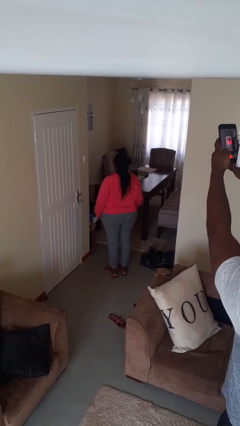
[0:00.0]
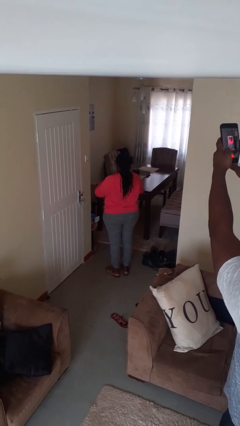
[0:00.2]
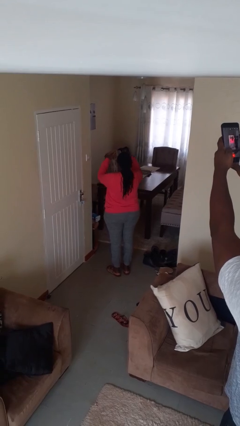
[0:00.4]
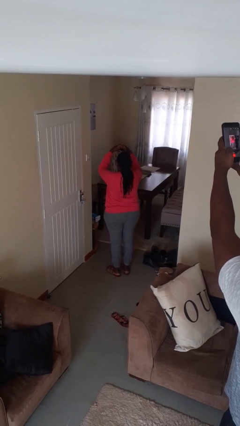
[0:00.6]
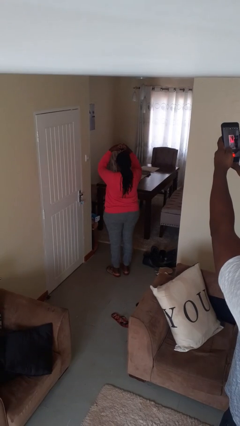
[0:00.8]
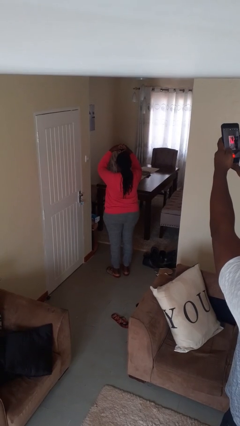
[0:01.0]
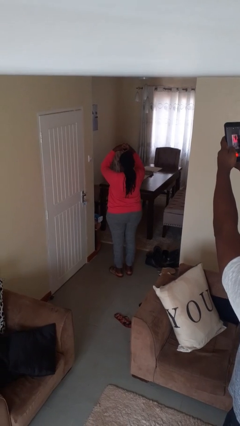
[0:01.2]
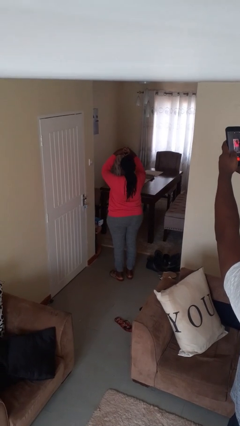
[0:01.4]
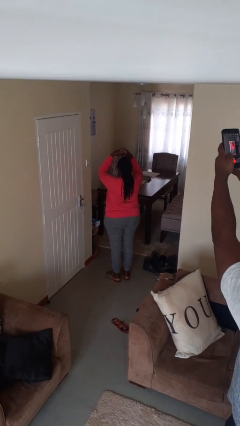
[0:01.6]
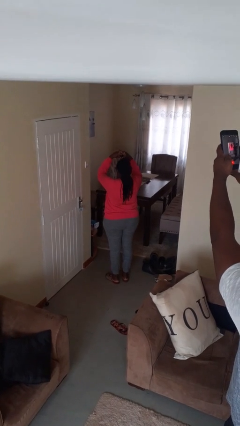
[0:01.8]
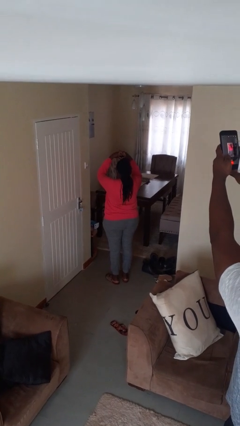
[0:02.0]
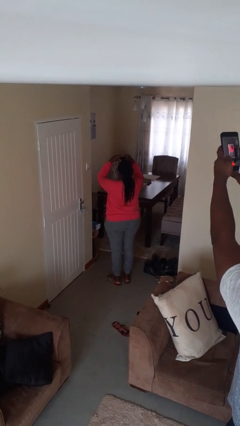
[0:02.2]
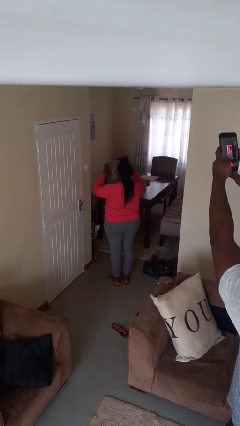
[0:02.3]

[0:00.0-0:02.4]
person gestures heart

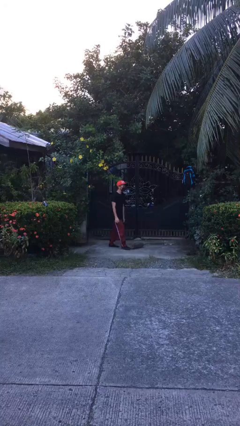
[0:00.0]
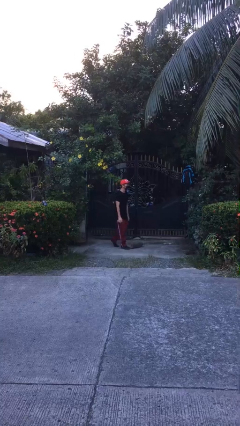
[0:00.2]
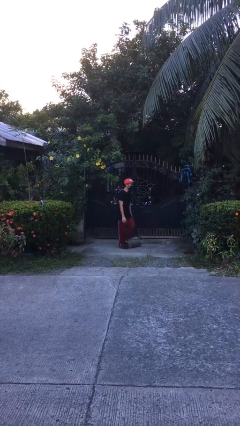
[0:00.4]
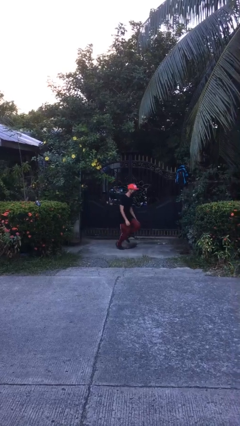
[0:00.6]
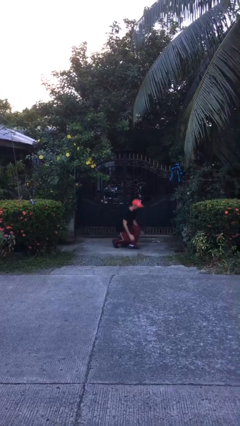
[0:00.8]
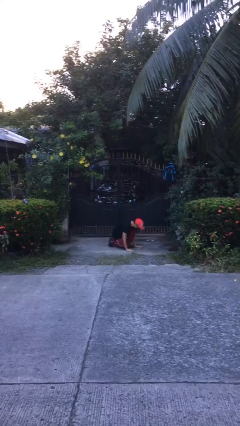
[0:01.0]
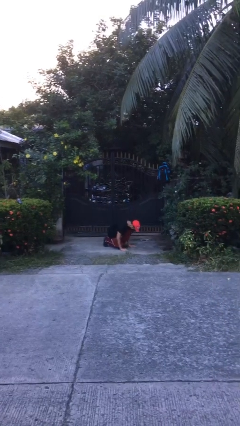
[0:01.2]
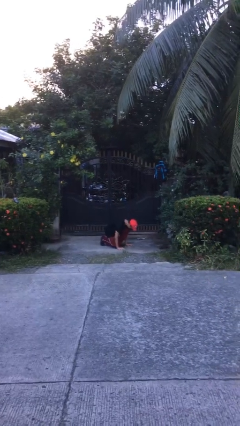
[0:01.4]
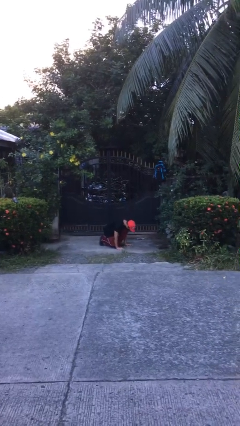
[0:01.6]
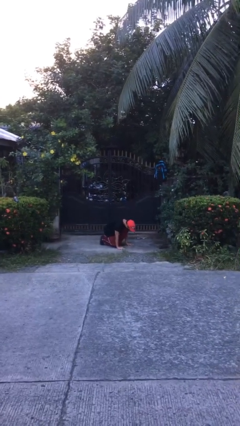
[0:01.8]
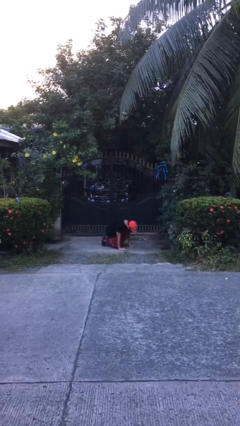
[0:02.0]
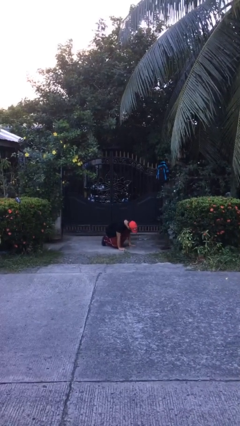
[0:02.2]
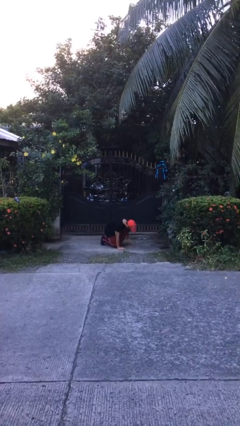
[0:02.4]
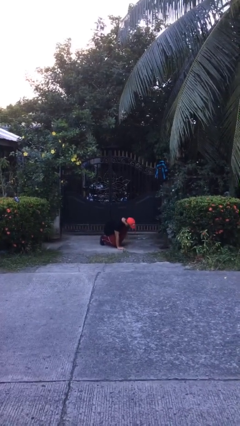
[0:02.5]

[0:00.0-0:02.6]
person trips on object on floor

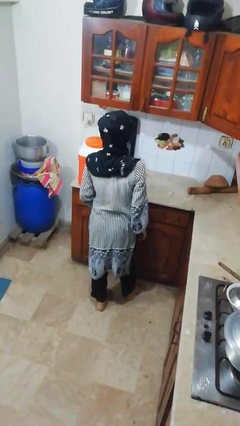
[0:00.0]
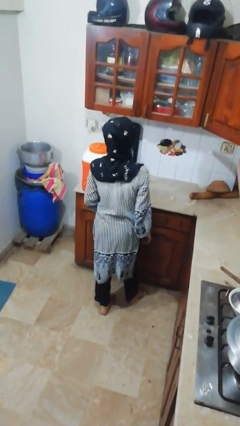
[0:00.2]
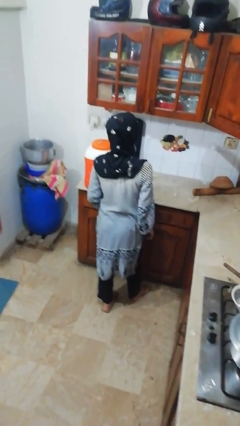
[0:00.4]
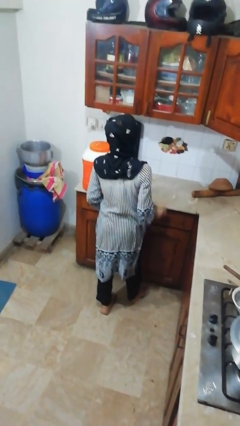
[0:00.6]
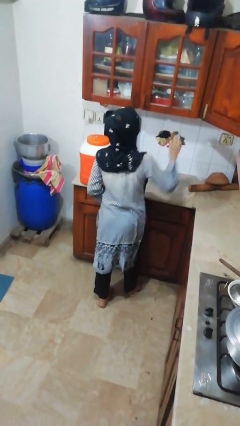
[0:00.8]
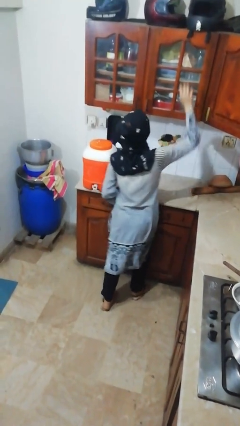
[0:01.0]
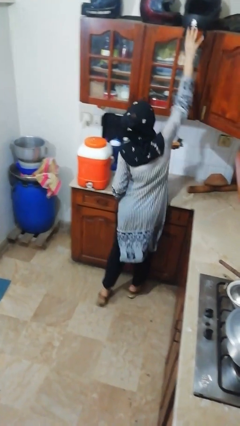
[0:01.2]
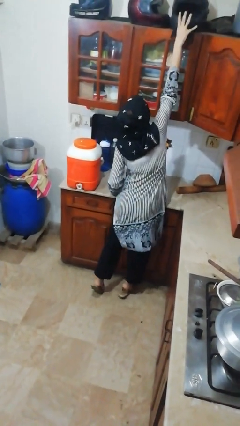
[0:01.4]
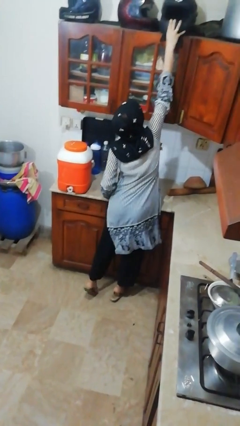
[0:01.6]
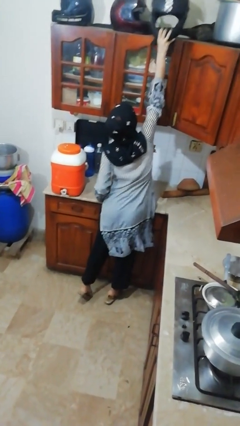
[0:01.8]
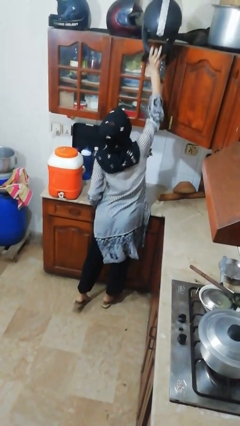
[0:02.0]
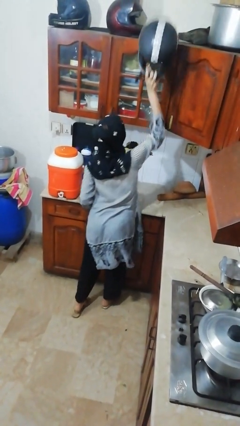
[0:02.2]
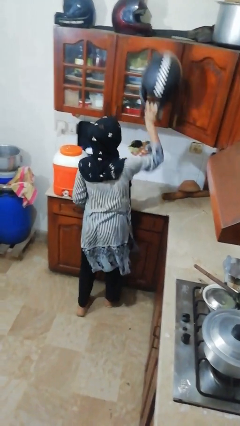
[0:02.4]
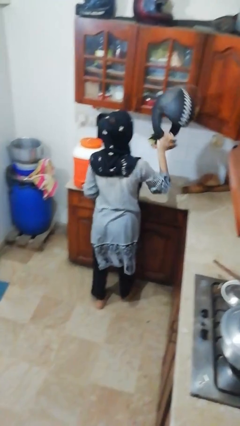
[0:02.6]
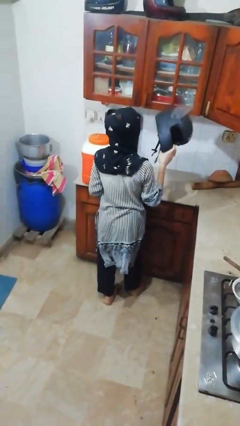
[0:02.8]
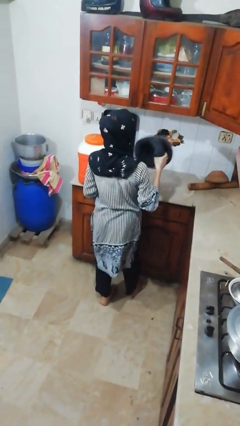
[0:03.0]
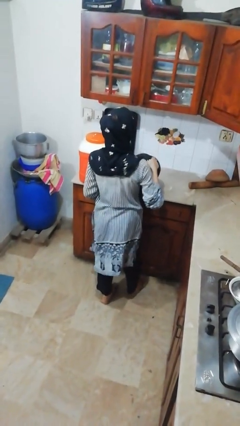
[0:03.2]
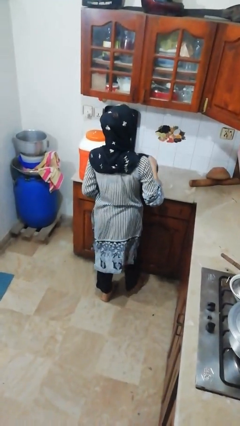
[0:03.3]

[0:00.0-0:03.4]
person picks up object from shelf

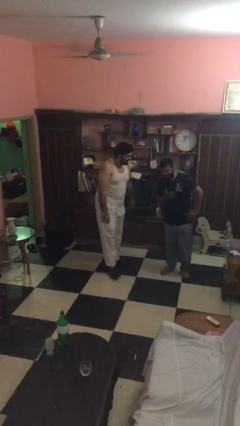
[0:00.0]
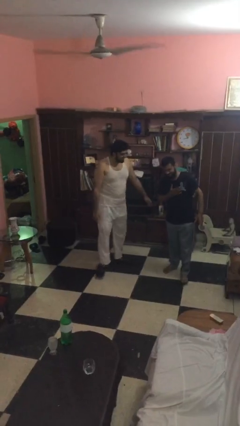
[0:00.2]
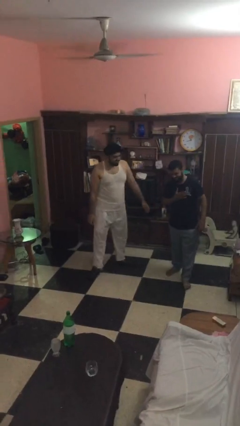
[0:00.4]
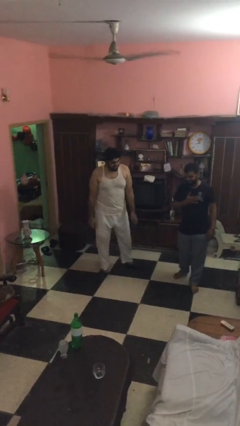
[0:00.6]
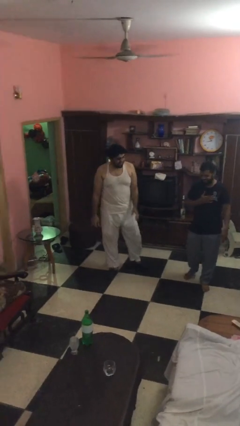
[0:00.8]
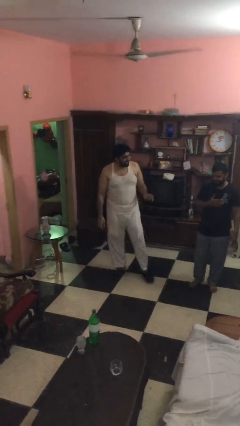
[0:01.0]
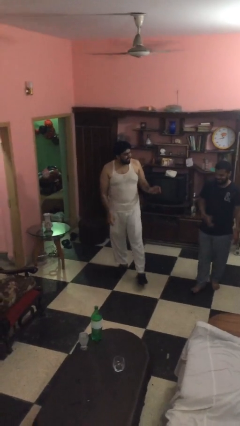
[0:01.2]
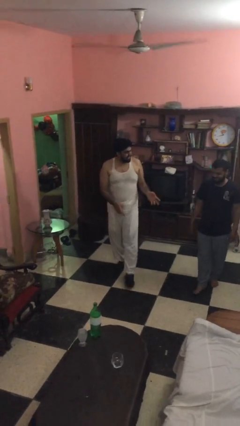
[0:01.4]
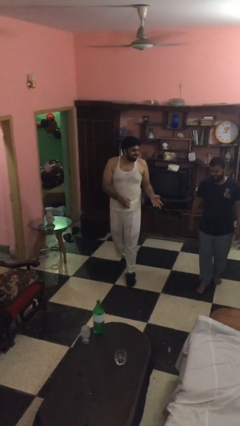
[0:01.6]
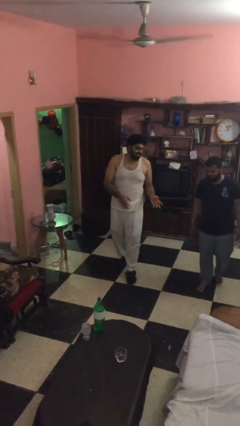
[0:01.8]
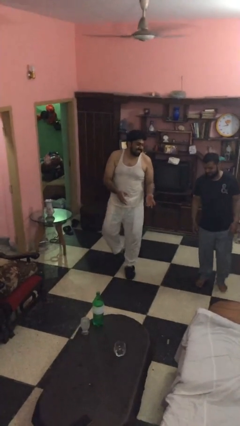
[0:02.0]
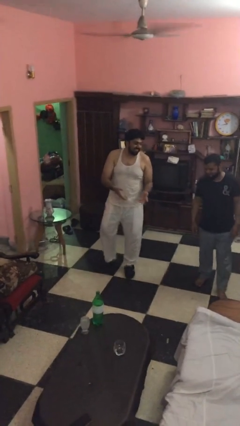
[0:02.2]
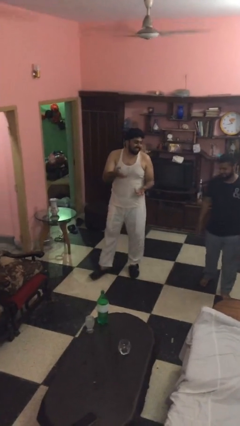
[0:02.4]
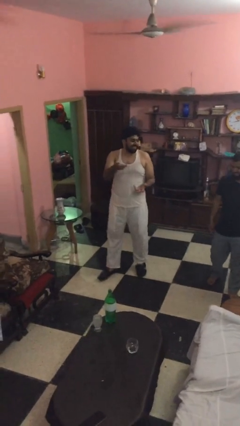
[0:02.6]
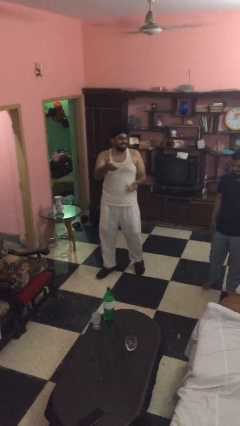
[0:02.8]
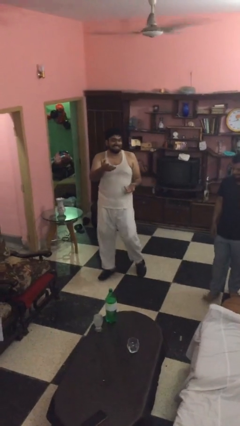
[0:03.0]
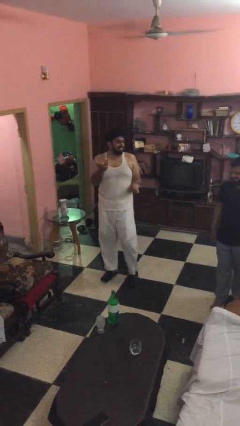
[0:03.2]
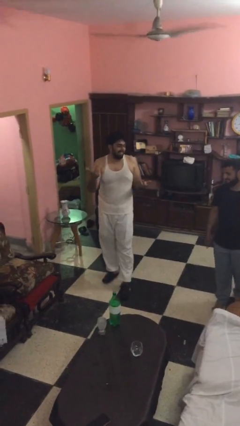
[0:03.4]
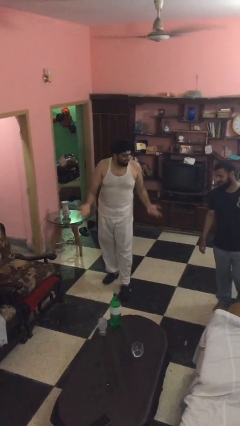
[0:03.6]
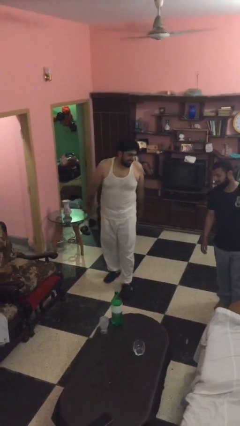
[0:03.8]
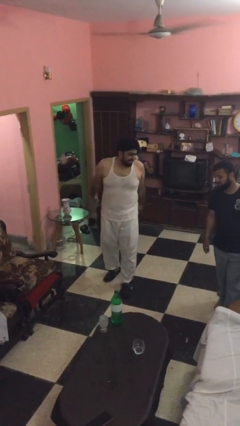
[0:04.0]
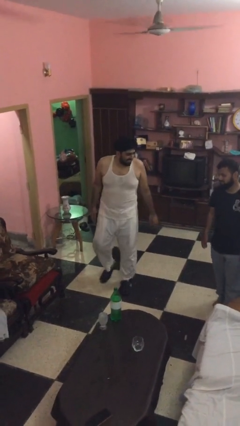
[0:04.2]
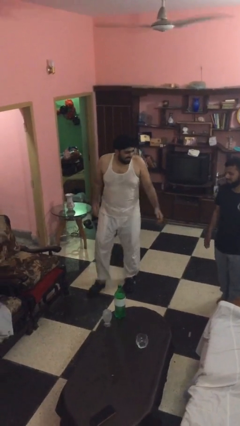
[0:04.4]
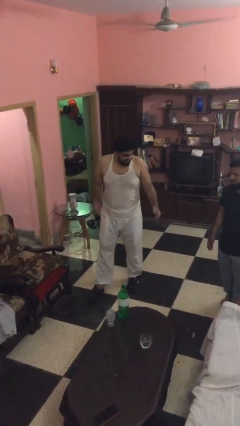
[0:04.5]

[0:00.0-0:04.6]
person talks to person

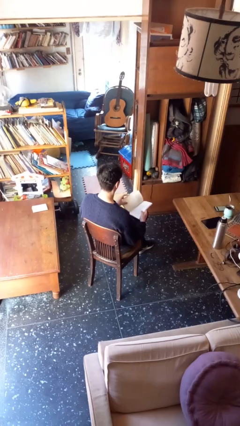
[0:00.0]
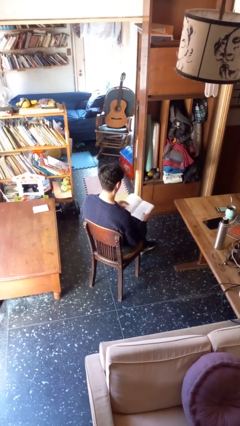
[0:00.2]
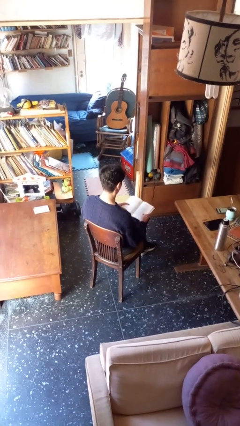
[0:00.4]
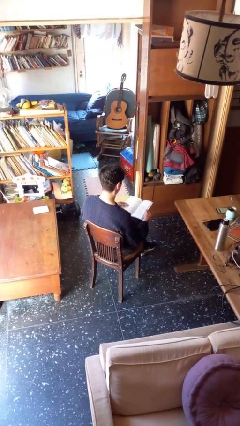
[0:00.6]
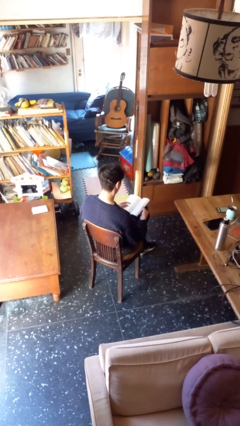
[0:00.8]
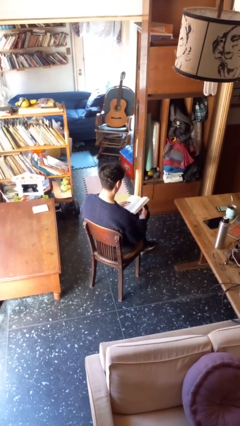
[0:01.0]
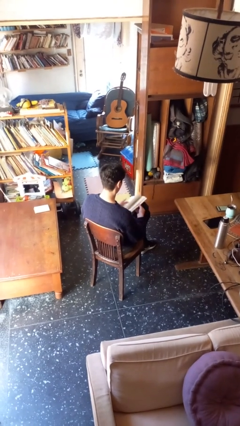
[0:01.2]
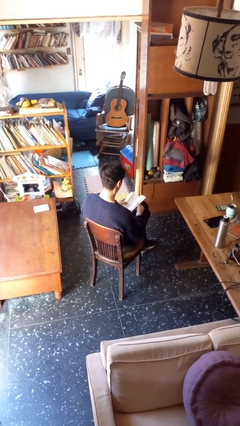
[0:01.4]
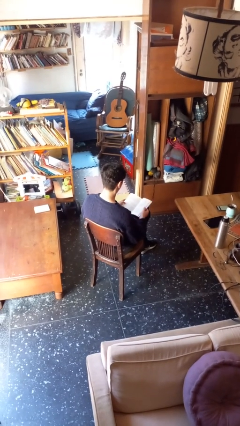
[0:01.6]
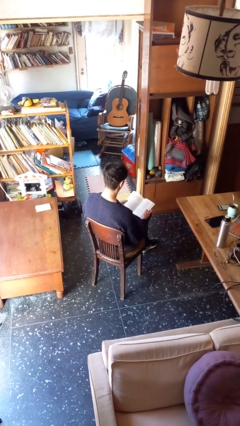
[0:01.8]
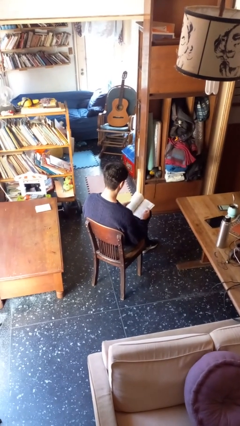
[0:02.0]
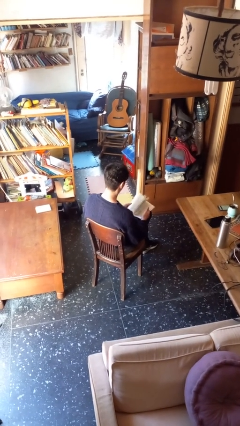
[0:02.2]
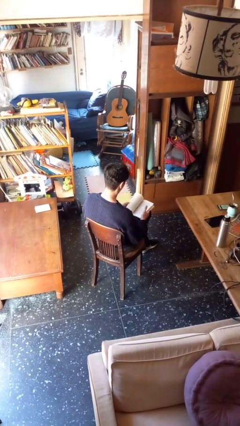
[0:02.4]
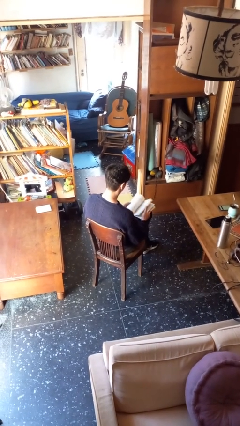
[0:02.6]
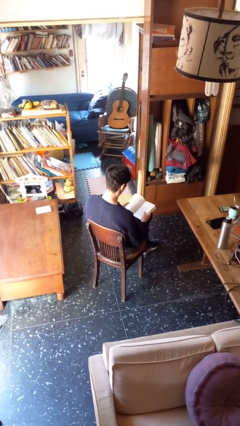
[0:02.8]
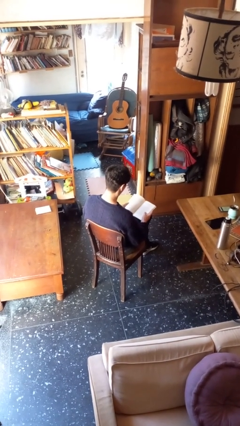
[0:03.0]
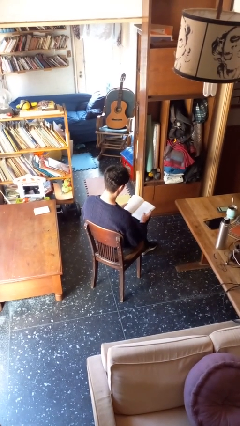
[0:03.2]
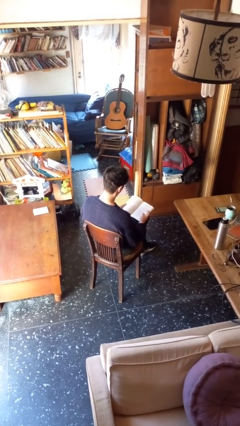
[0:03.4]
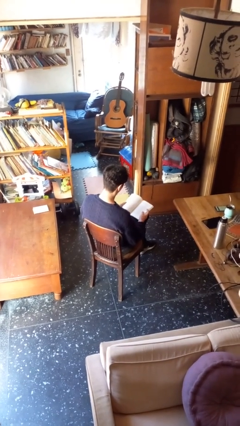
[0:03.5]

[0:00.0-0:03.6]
person reads book

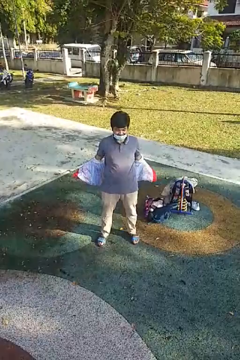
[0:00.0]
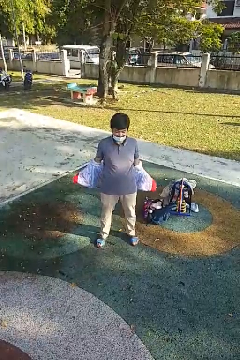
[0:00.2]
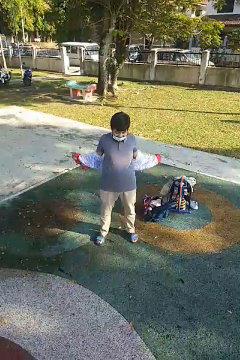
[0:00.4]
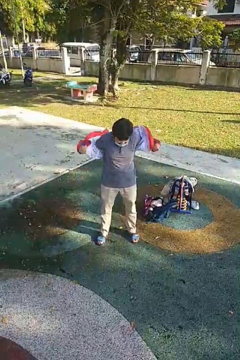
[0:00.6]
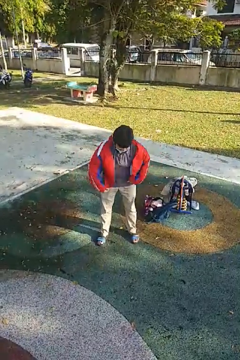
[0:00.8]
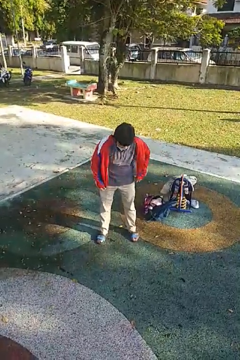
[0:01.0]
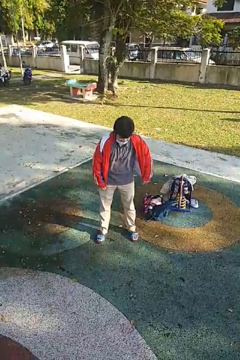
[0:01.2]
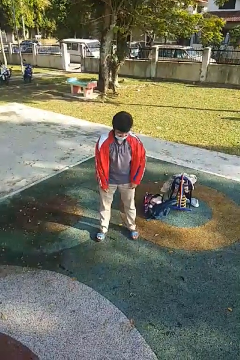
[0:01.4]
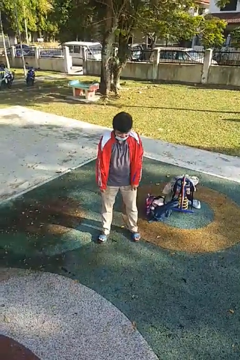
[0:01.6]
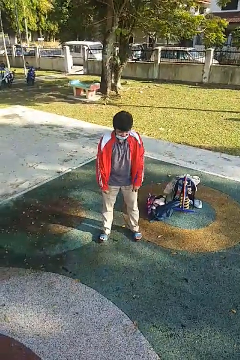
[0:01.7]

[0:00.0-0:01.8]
person puts on jacket
